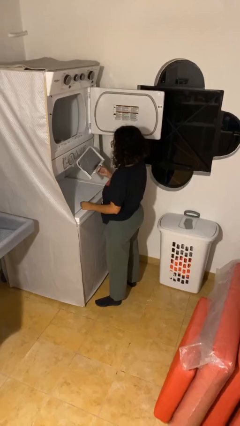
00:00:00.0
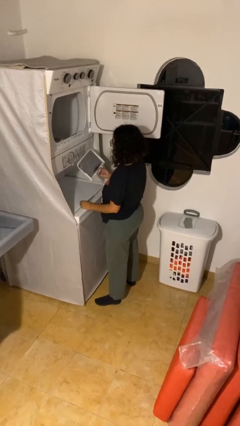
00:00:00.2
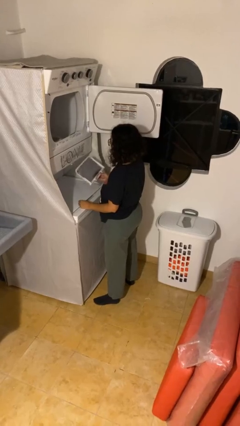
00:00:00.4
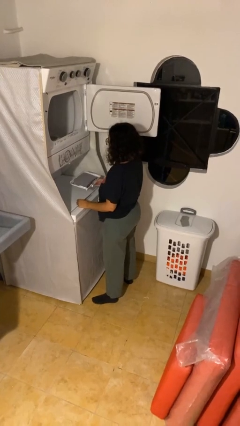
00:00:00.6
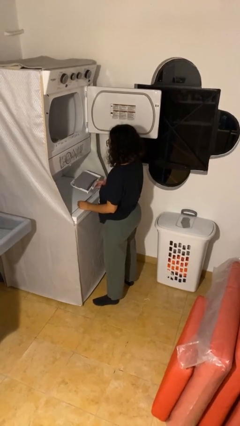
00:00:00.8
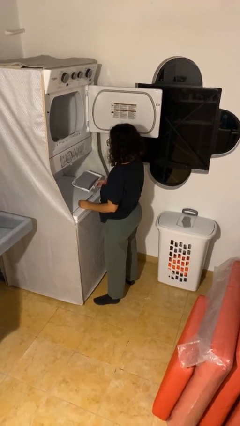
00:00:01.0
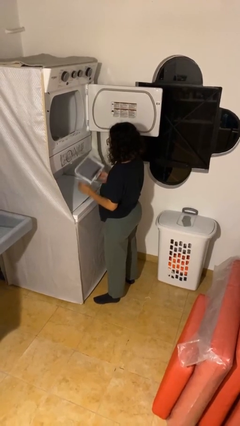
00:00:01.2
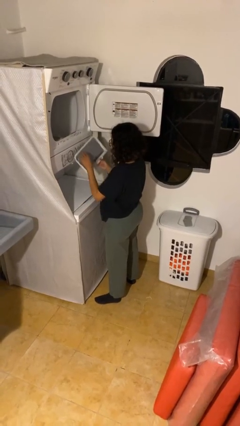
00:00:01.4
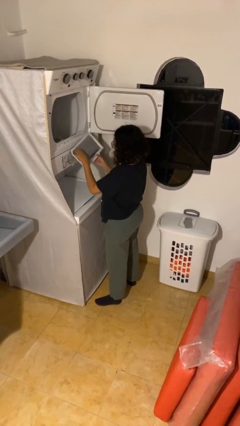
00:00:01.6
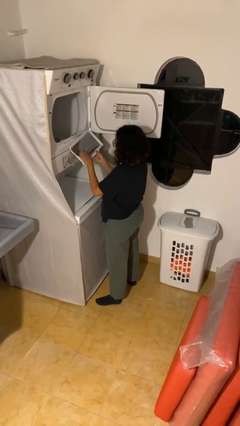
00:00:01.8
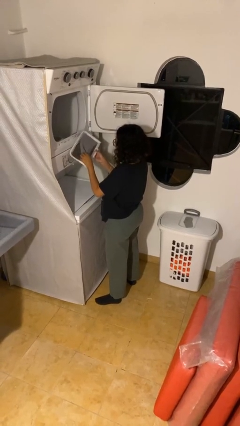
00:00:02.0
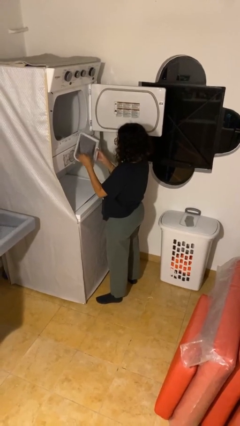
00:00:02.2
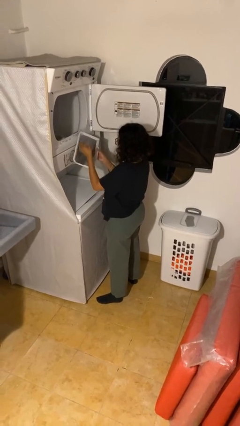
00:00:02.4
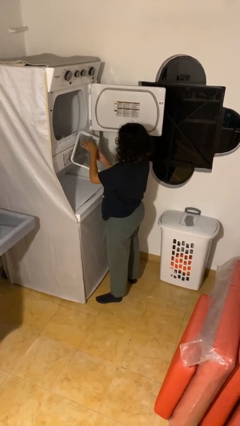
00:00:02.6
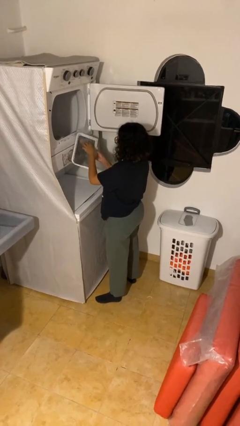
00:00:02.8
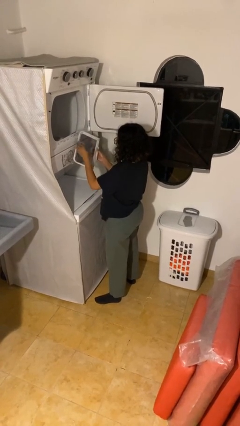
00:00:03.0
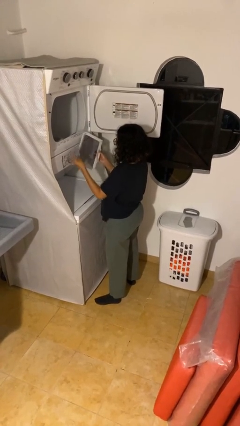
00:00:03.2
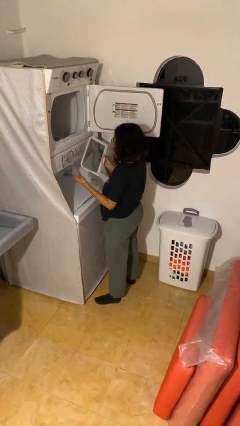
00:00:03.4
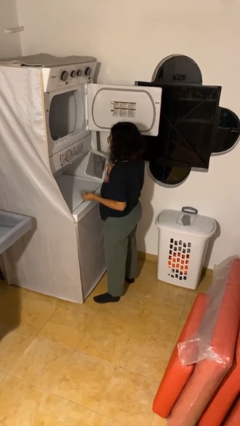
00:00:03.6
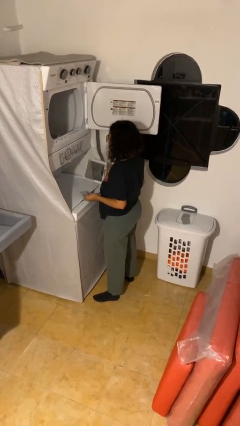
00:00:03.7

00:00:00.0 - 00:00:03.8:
person cleans dryer lint trap

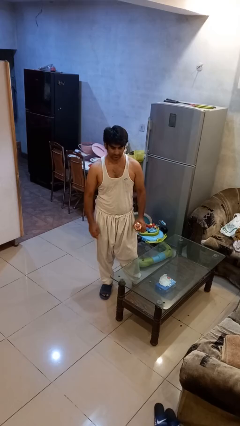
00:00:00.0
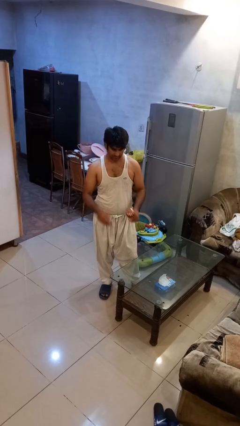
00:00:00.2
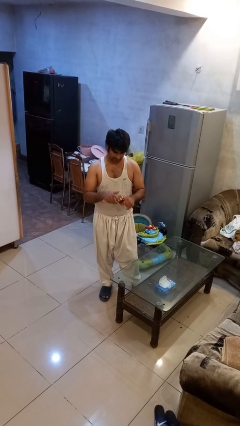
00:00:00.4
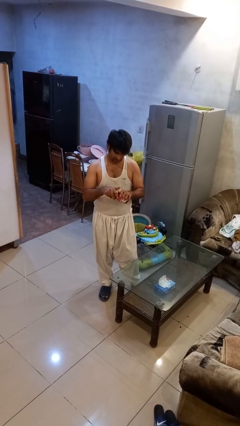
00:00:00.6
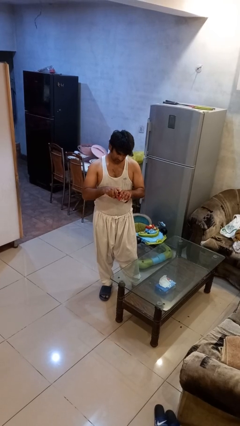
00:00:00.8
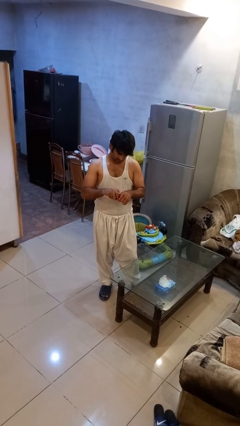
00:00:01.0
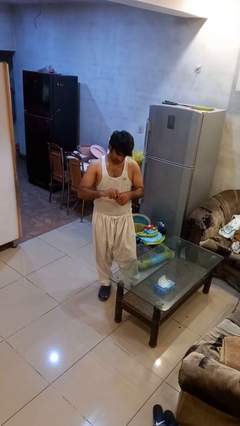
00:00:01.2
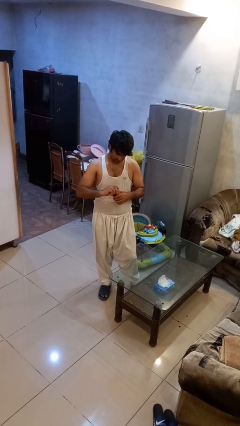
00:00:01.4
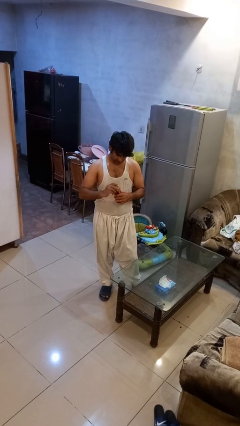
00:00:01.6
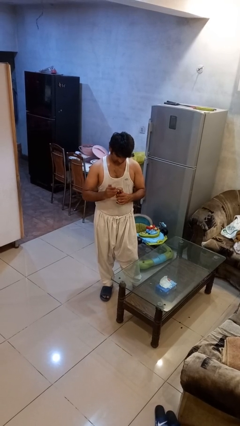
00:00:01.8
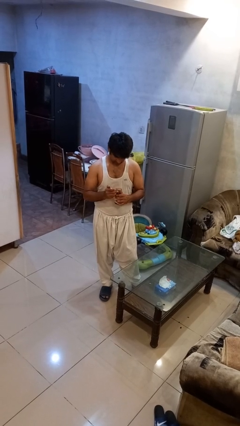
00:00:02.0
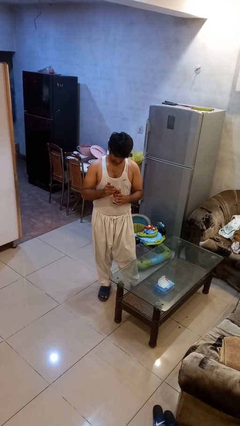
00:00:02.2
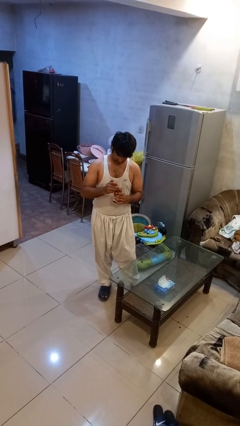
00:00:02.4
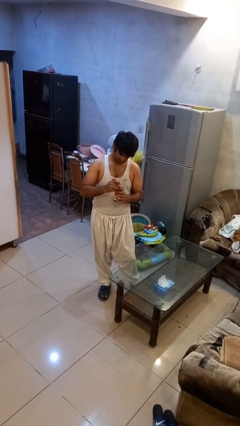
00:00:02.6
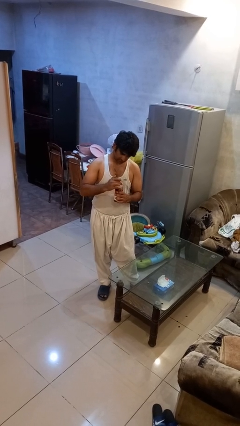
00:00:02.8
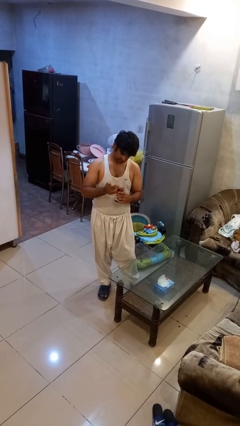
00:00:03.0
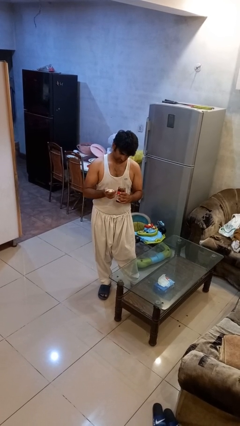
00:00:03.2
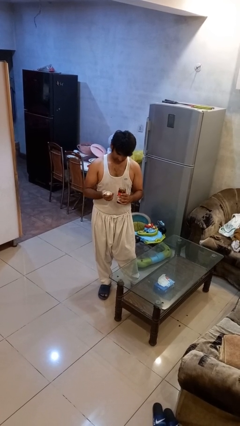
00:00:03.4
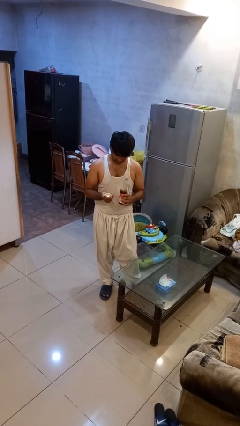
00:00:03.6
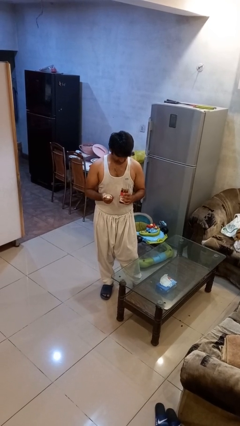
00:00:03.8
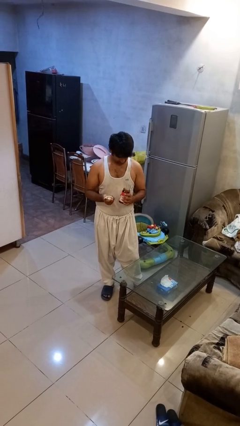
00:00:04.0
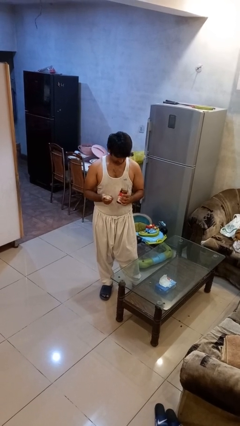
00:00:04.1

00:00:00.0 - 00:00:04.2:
person opens jar

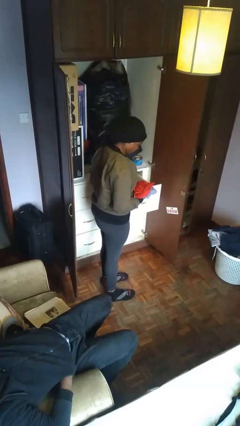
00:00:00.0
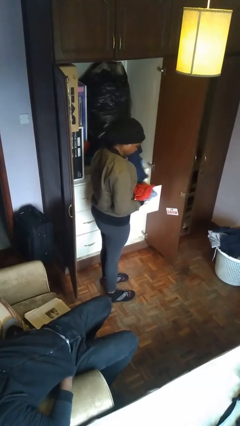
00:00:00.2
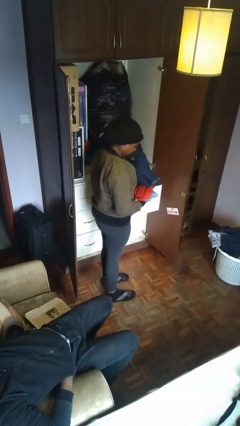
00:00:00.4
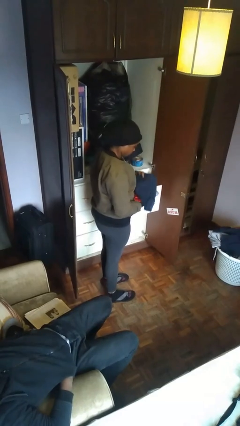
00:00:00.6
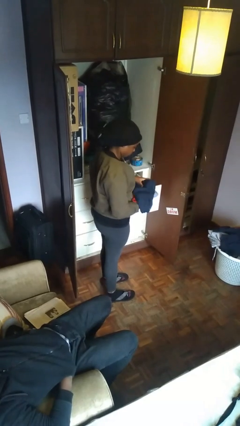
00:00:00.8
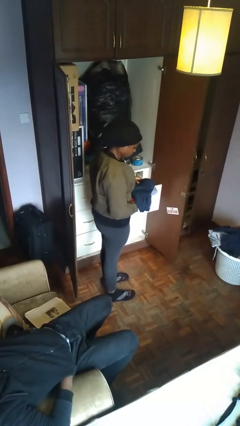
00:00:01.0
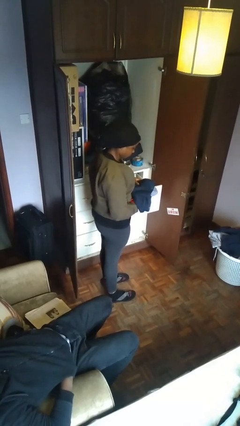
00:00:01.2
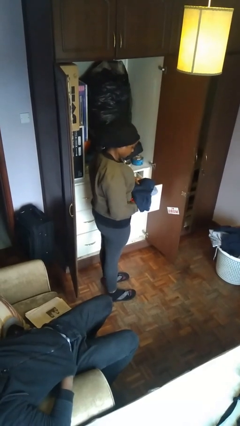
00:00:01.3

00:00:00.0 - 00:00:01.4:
person takes clothes from dresser

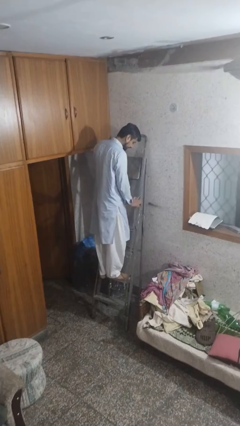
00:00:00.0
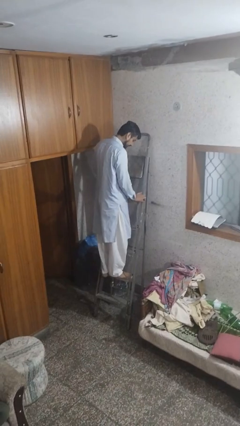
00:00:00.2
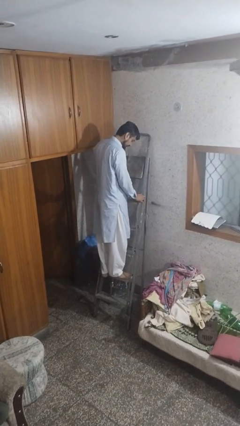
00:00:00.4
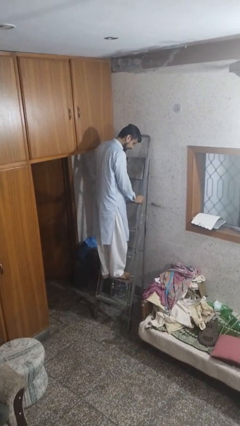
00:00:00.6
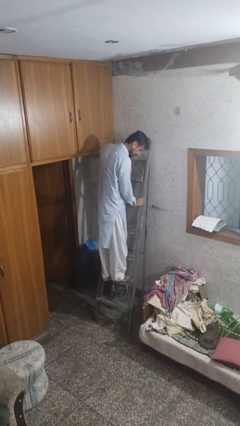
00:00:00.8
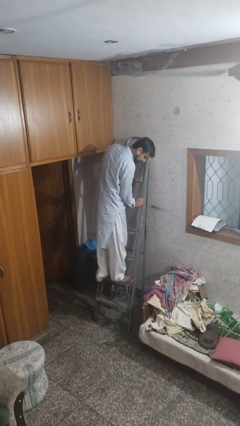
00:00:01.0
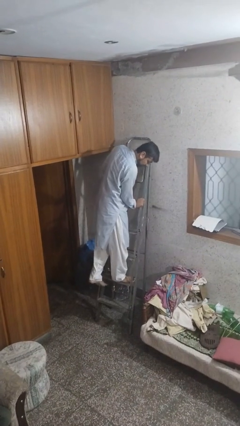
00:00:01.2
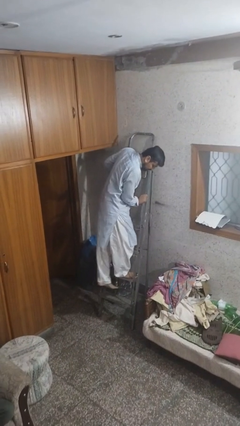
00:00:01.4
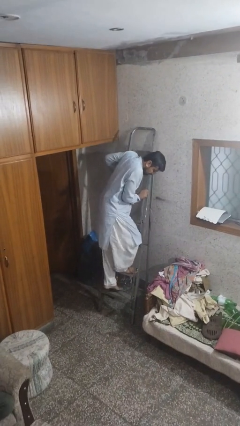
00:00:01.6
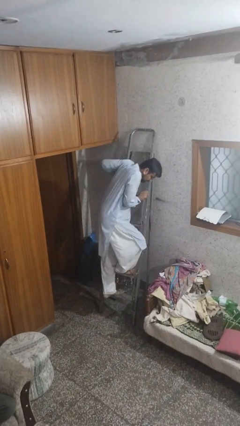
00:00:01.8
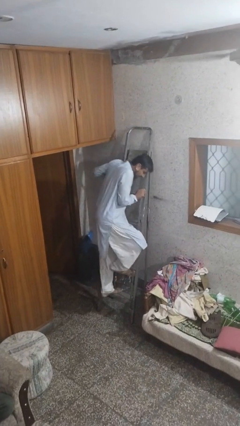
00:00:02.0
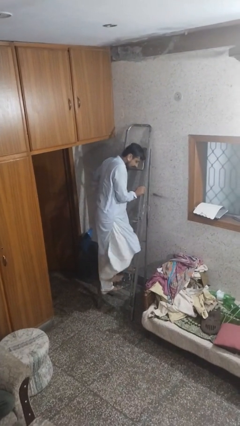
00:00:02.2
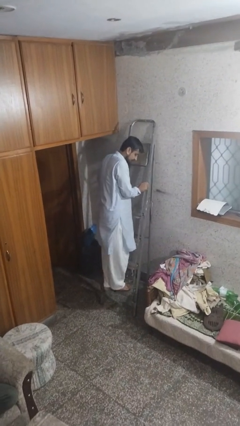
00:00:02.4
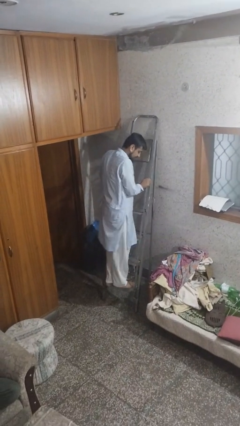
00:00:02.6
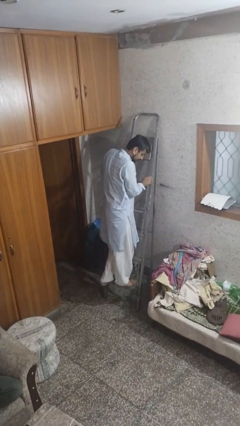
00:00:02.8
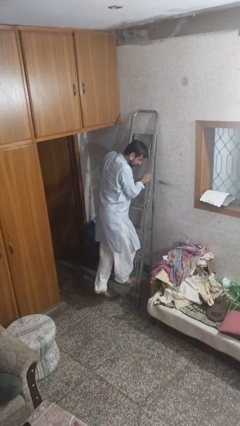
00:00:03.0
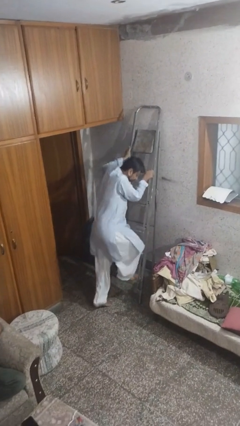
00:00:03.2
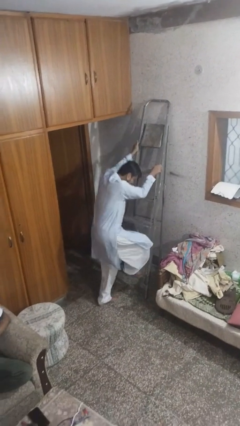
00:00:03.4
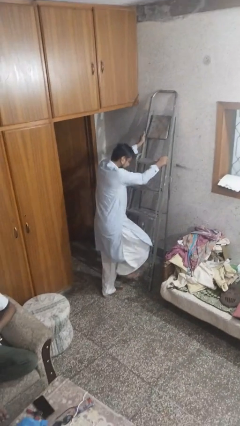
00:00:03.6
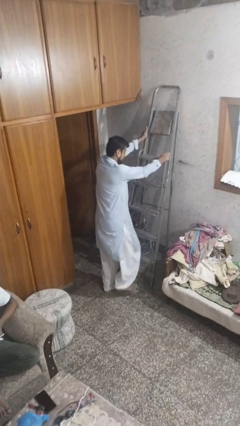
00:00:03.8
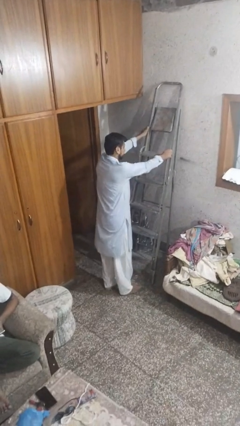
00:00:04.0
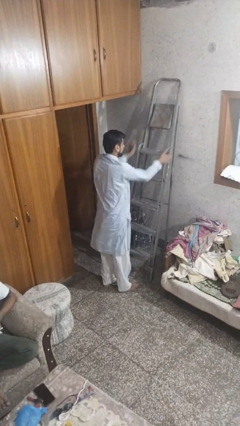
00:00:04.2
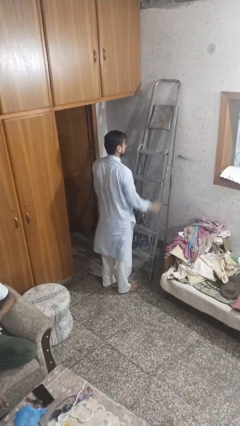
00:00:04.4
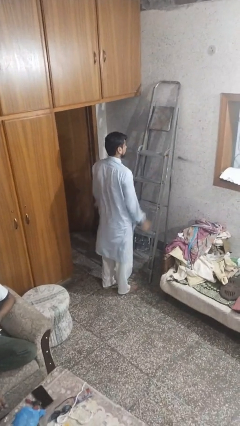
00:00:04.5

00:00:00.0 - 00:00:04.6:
person climbs down ladder

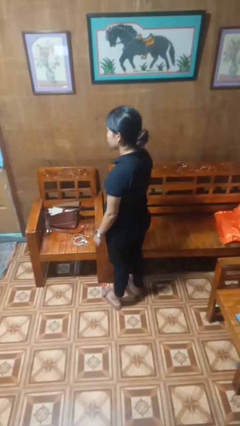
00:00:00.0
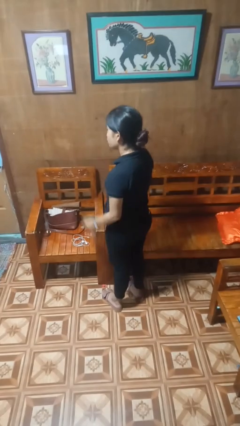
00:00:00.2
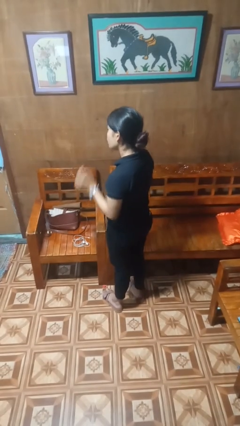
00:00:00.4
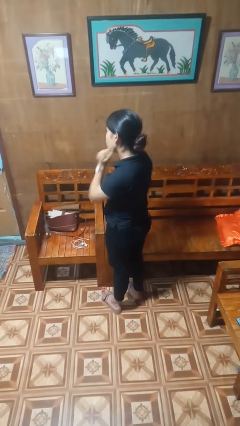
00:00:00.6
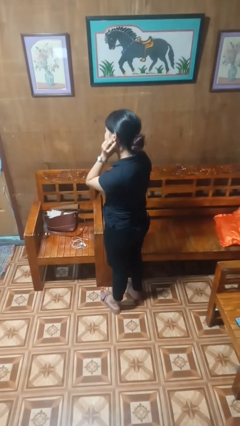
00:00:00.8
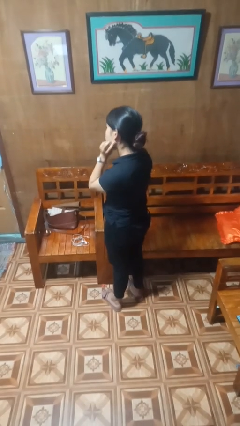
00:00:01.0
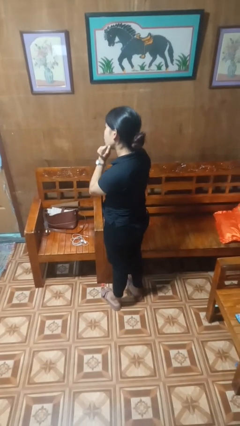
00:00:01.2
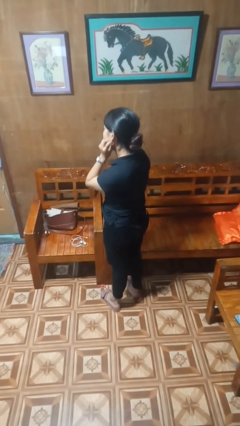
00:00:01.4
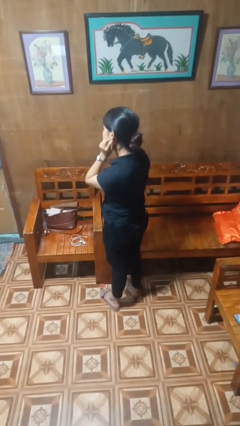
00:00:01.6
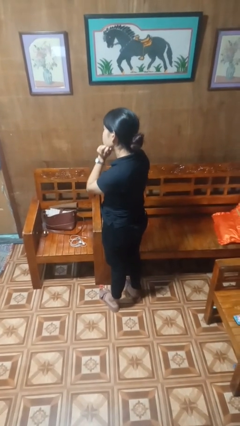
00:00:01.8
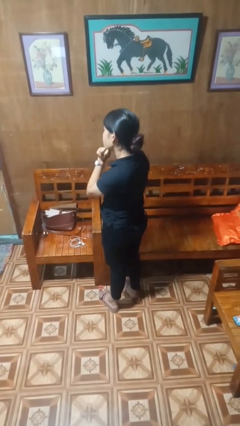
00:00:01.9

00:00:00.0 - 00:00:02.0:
person scratches face

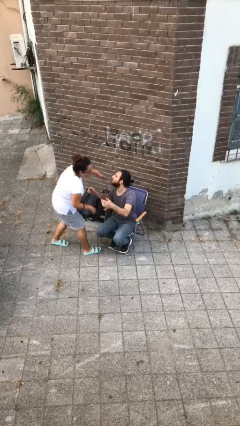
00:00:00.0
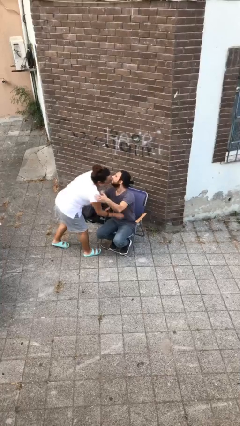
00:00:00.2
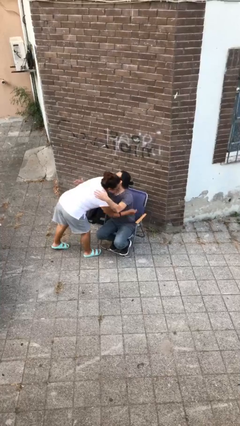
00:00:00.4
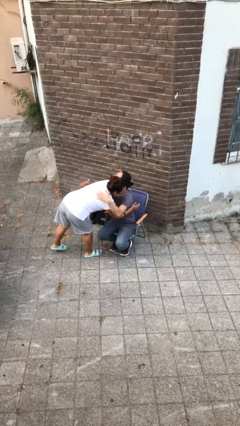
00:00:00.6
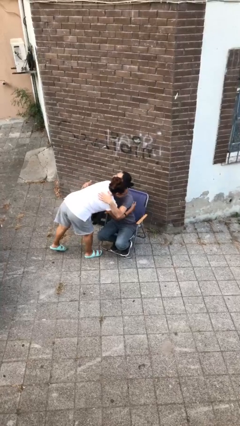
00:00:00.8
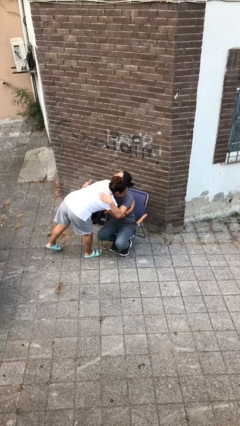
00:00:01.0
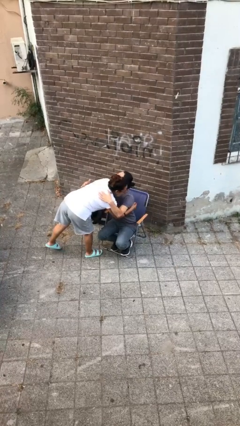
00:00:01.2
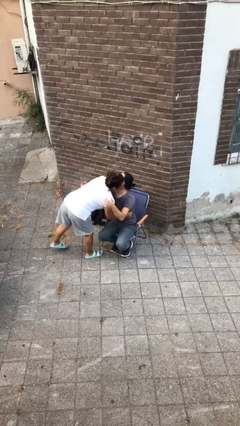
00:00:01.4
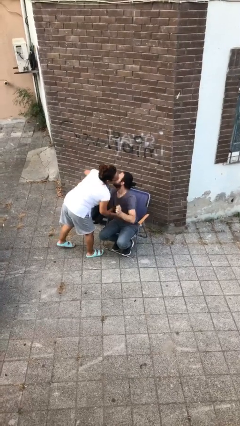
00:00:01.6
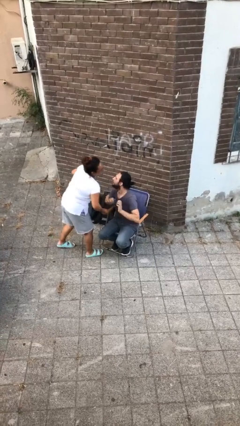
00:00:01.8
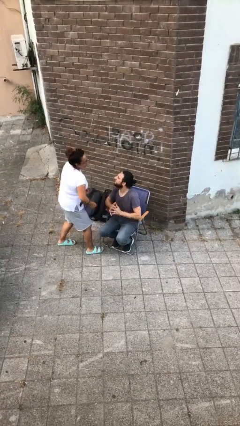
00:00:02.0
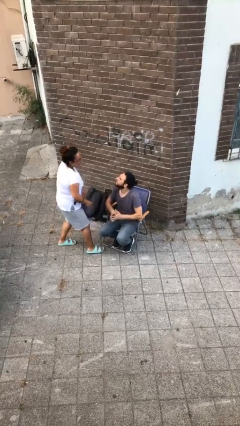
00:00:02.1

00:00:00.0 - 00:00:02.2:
person embraces person
